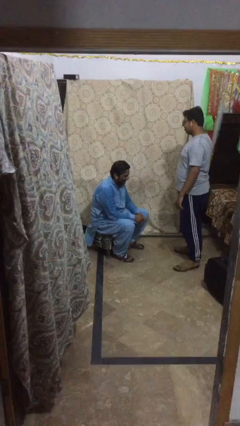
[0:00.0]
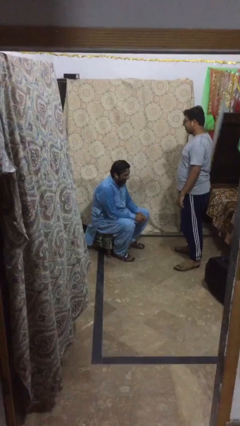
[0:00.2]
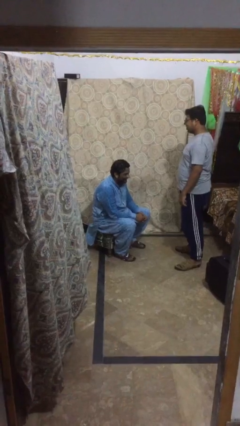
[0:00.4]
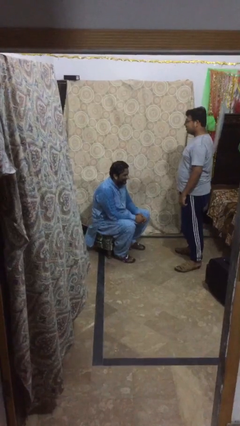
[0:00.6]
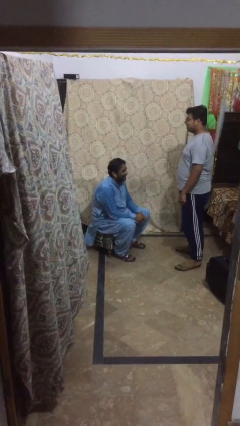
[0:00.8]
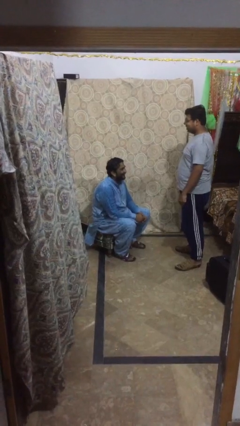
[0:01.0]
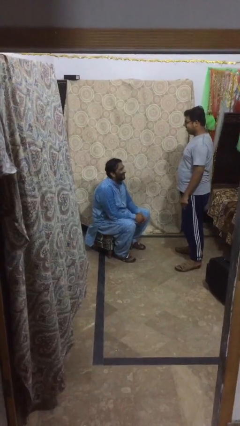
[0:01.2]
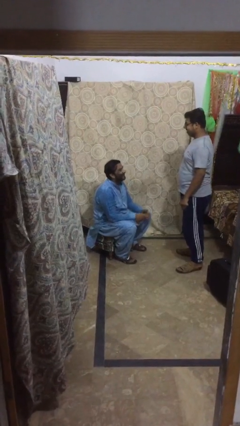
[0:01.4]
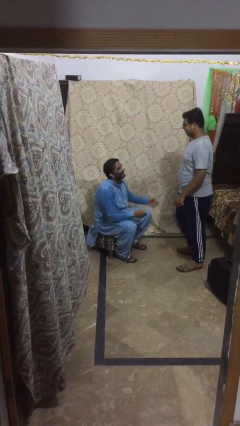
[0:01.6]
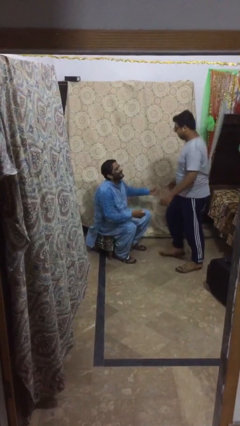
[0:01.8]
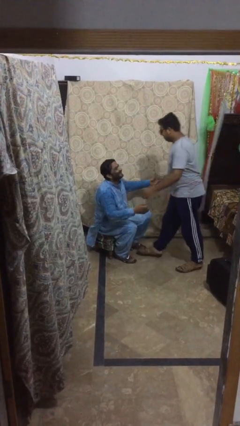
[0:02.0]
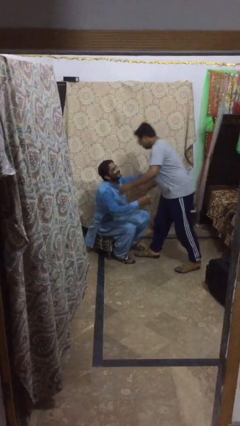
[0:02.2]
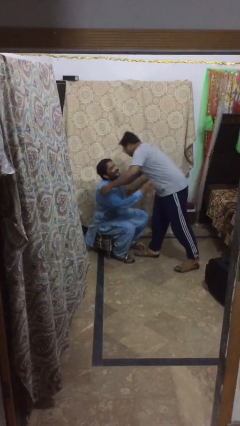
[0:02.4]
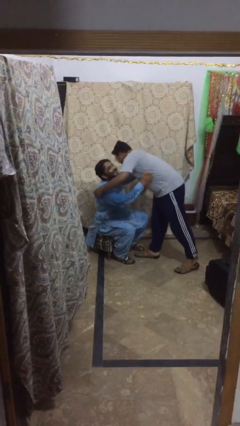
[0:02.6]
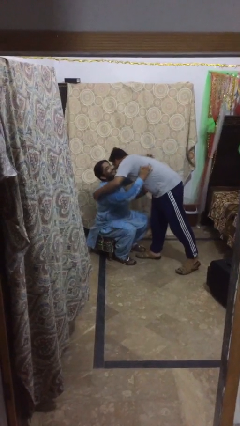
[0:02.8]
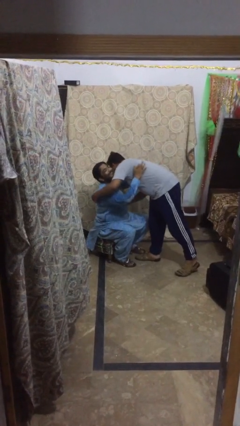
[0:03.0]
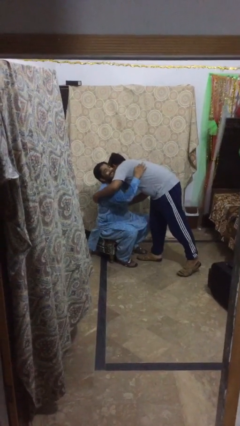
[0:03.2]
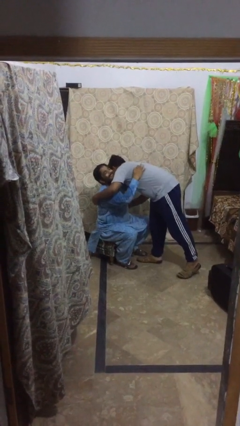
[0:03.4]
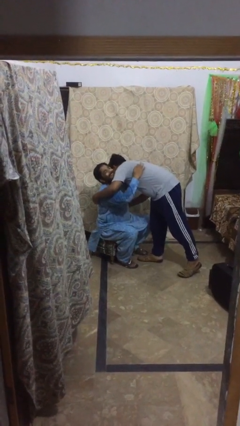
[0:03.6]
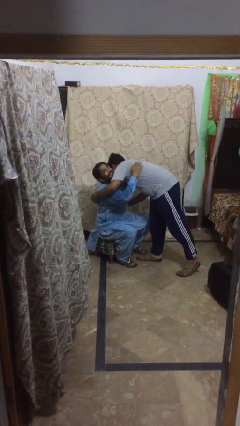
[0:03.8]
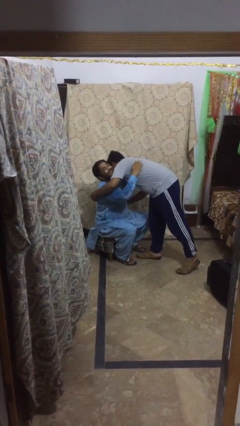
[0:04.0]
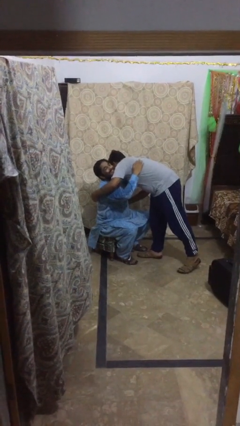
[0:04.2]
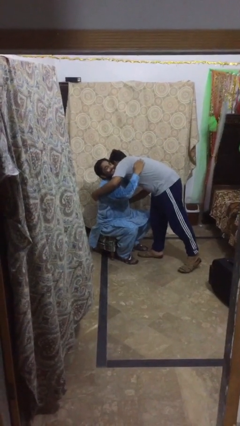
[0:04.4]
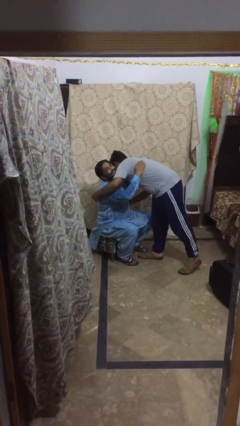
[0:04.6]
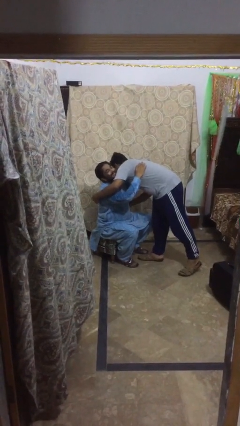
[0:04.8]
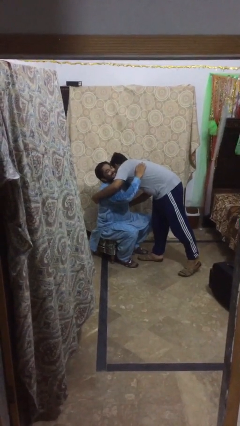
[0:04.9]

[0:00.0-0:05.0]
person embraces person

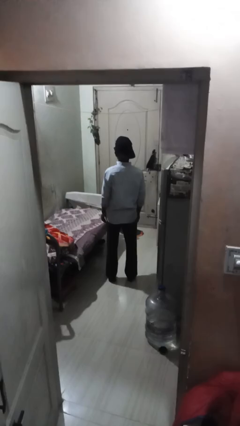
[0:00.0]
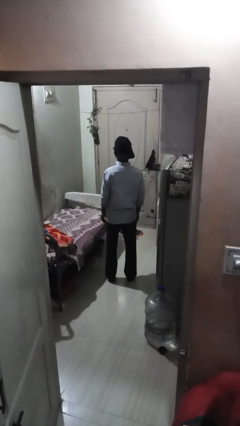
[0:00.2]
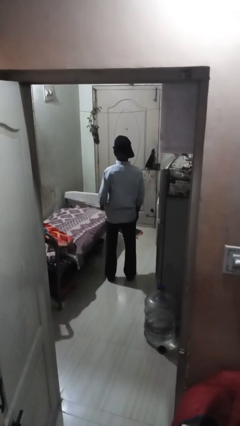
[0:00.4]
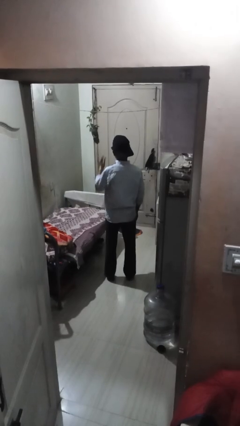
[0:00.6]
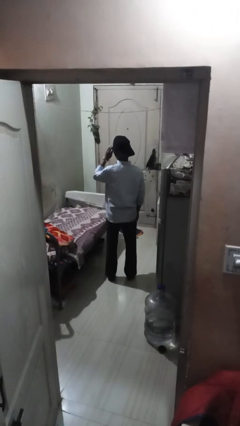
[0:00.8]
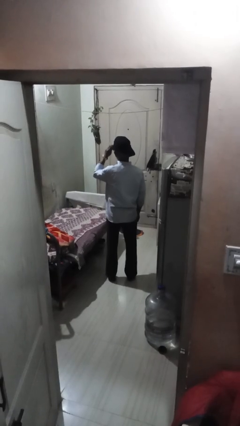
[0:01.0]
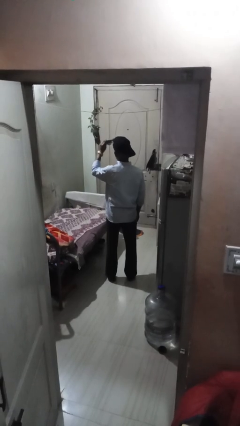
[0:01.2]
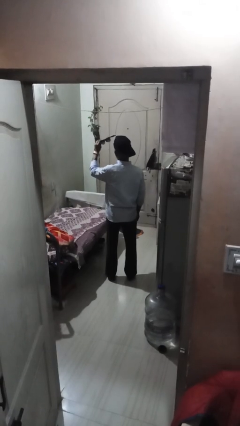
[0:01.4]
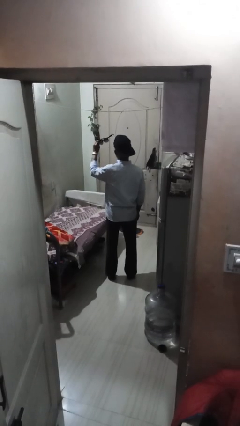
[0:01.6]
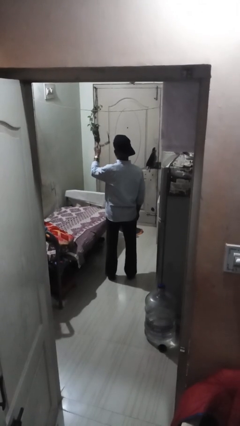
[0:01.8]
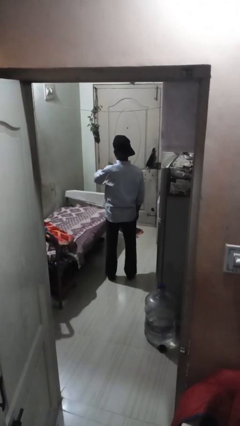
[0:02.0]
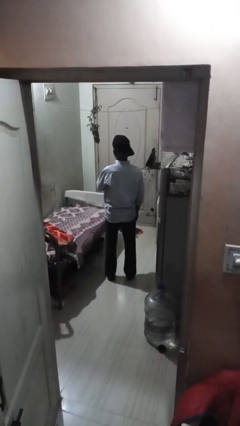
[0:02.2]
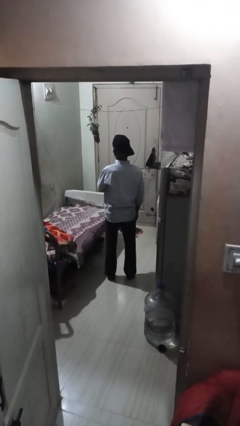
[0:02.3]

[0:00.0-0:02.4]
person takes off sunglasses

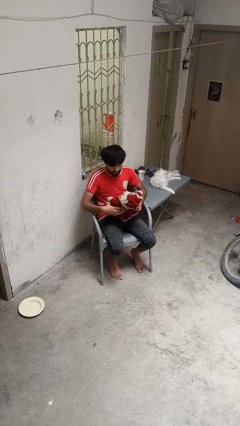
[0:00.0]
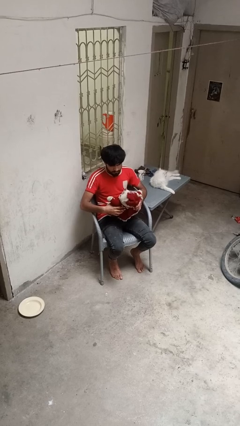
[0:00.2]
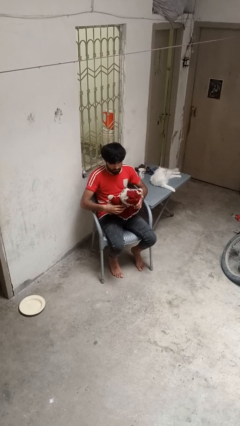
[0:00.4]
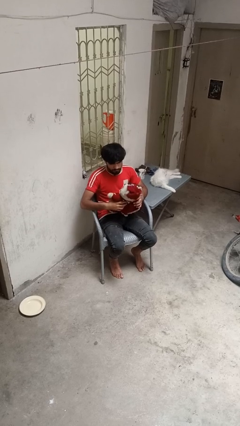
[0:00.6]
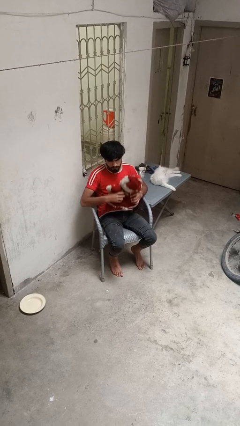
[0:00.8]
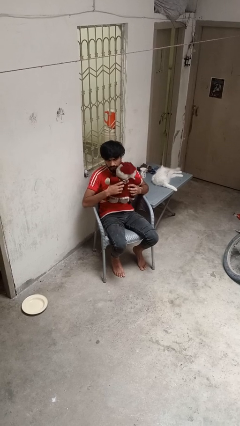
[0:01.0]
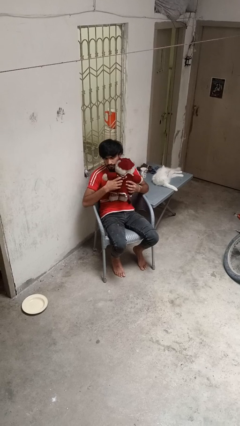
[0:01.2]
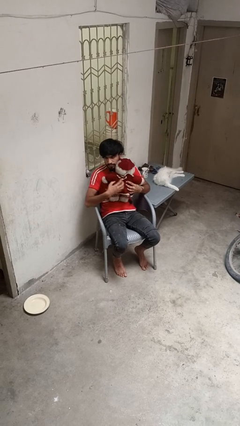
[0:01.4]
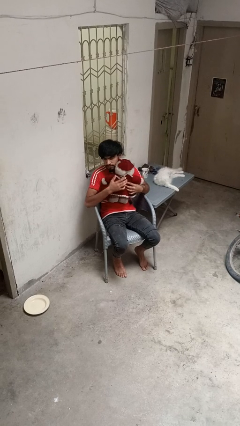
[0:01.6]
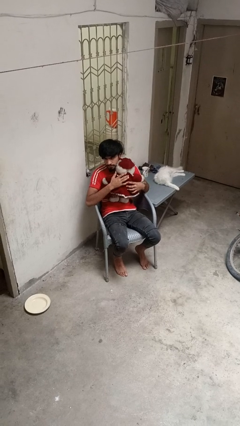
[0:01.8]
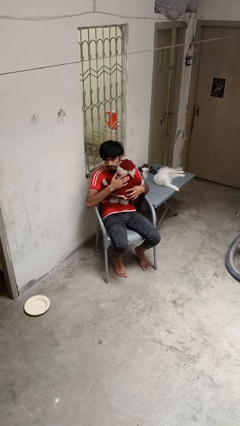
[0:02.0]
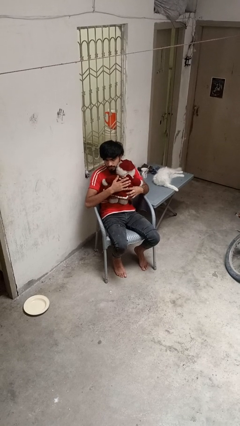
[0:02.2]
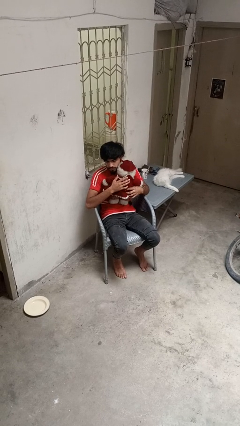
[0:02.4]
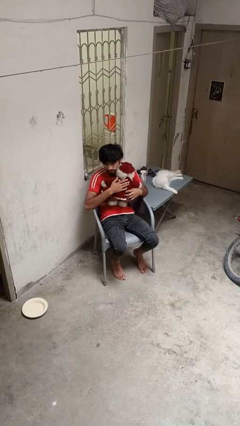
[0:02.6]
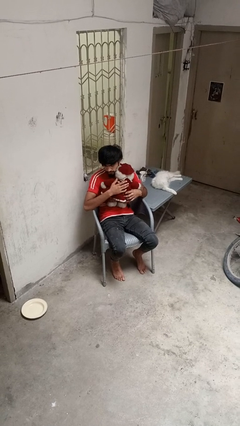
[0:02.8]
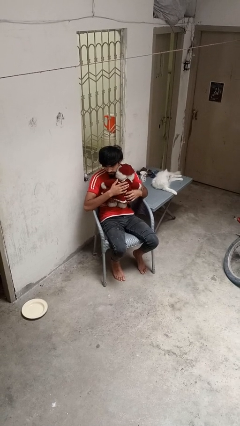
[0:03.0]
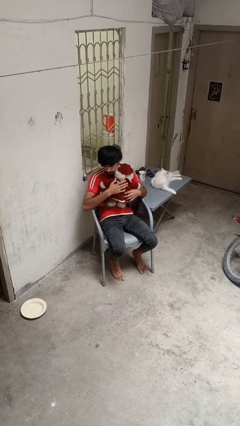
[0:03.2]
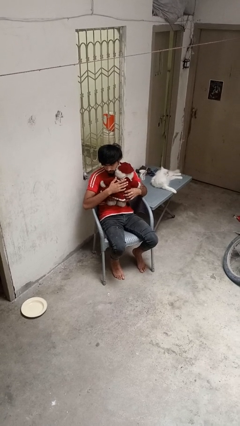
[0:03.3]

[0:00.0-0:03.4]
person hugs stuffed animal

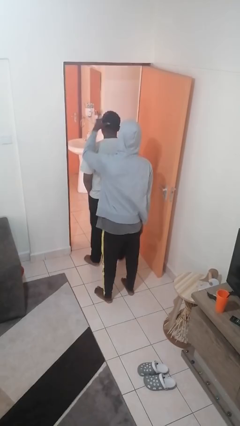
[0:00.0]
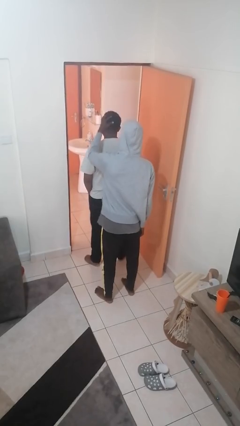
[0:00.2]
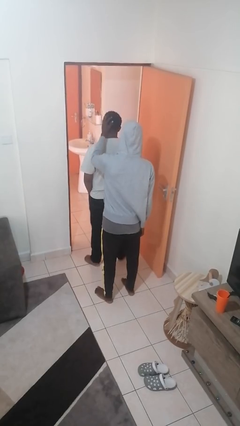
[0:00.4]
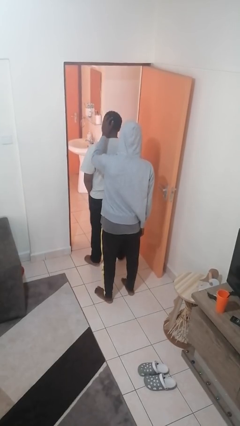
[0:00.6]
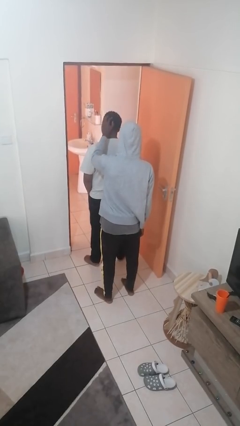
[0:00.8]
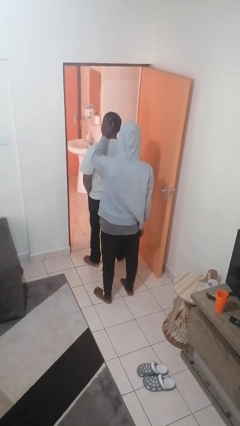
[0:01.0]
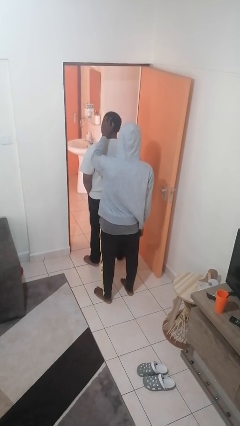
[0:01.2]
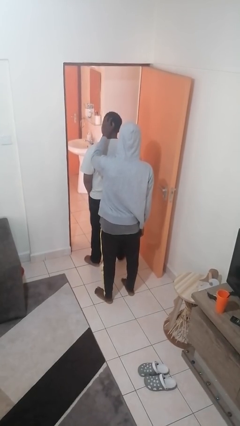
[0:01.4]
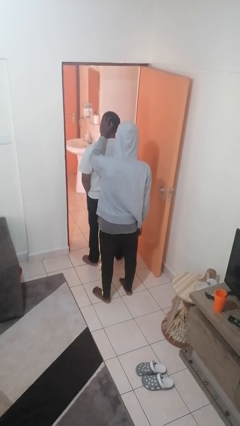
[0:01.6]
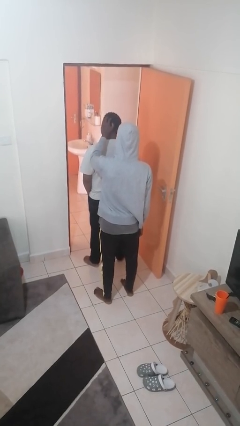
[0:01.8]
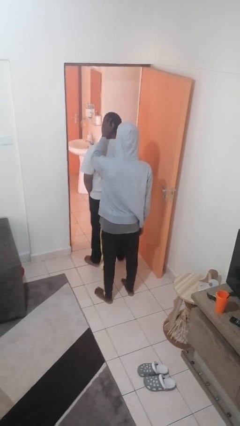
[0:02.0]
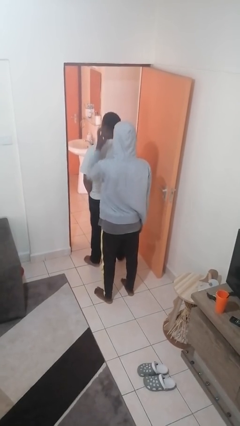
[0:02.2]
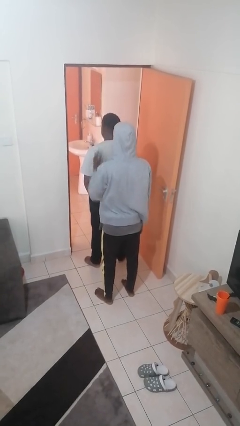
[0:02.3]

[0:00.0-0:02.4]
person grabs person by hair

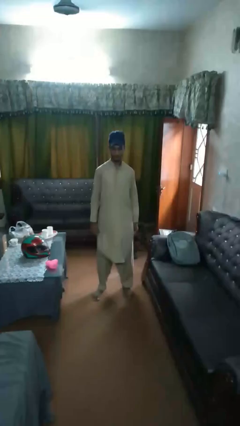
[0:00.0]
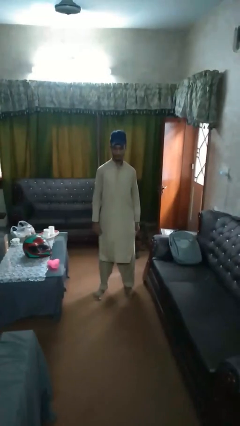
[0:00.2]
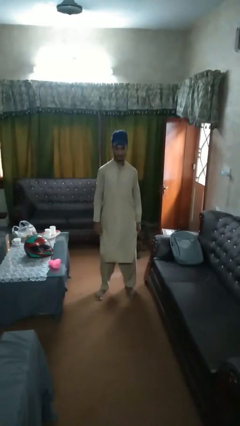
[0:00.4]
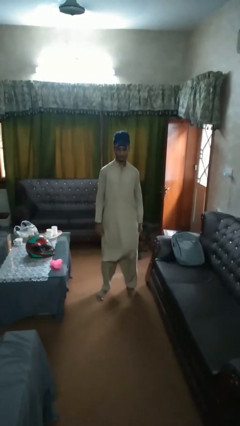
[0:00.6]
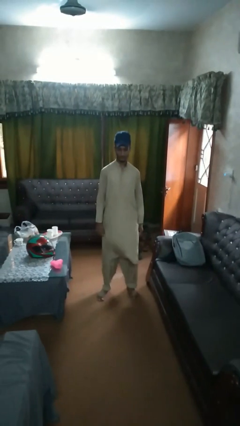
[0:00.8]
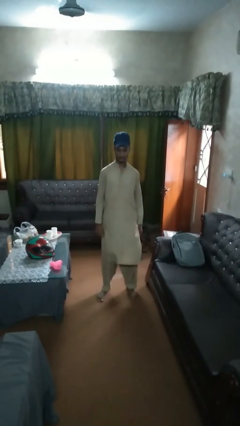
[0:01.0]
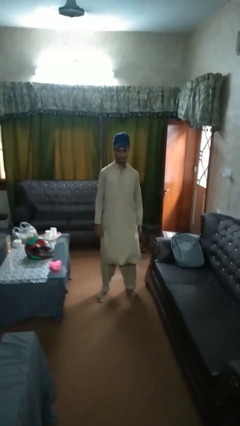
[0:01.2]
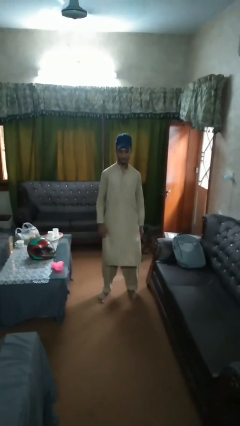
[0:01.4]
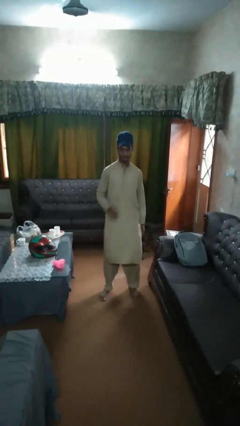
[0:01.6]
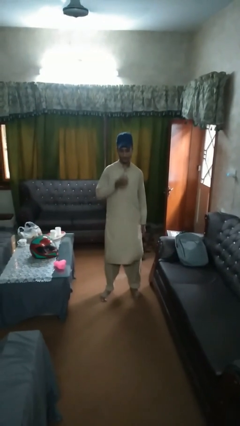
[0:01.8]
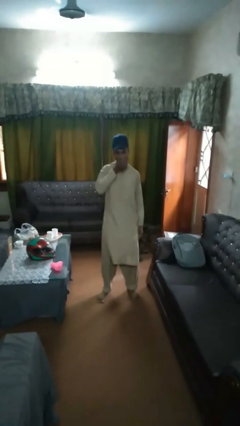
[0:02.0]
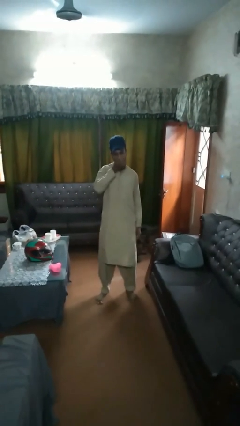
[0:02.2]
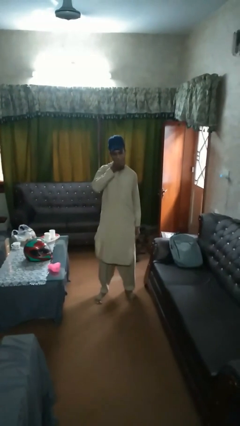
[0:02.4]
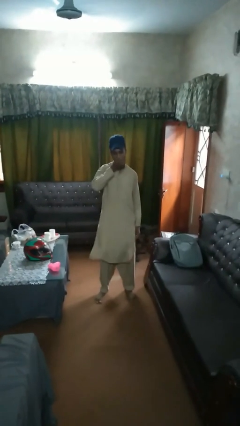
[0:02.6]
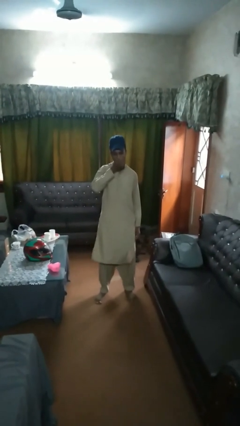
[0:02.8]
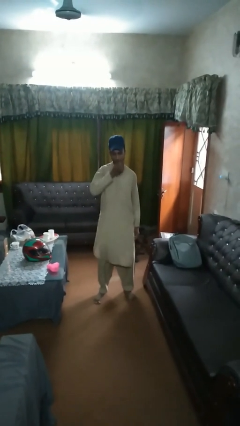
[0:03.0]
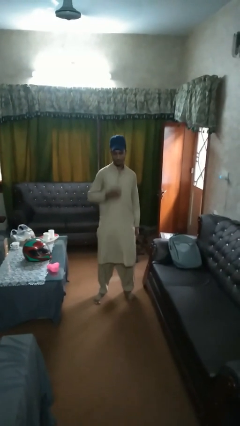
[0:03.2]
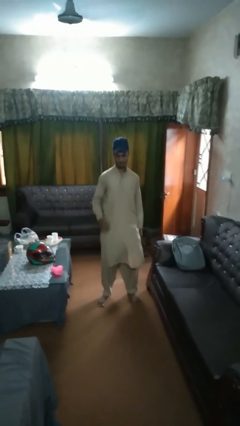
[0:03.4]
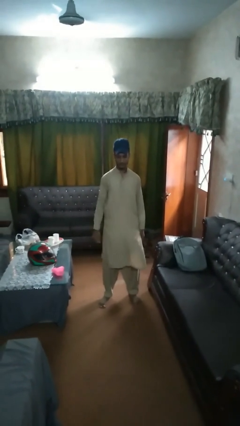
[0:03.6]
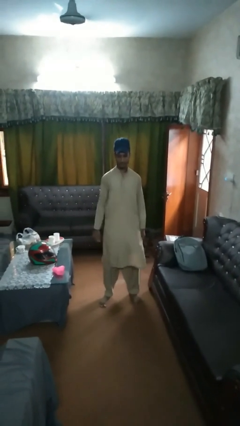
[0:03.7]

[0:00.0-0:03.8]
person eats apple

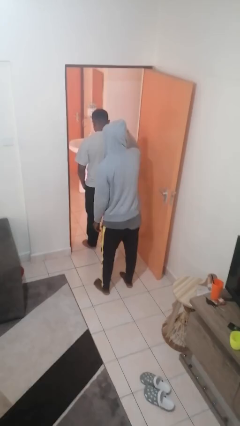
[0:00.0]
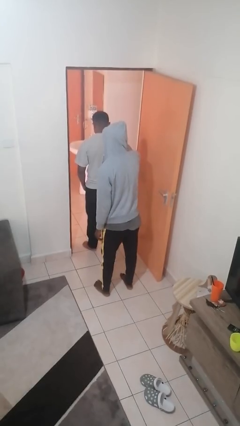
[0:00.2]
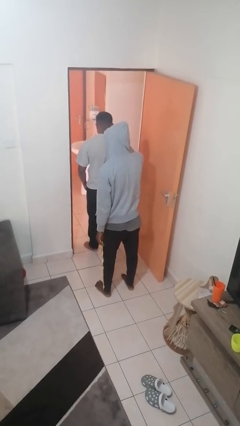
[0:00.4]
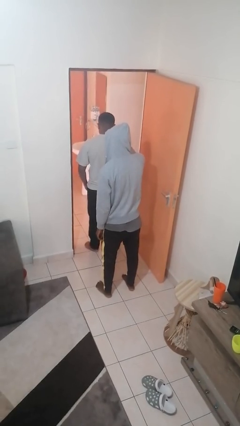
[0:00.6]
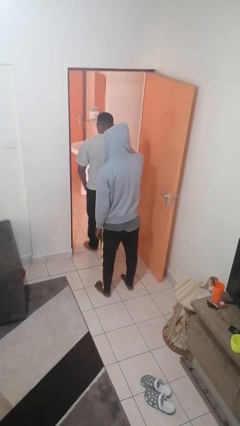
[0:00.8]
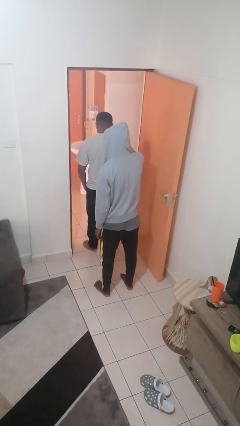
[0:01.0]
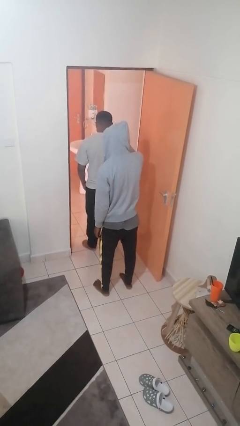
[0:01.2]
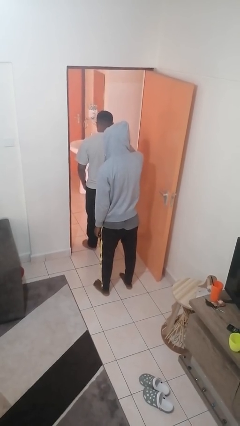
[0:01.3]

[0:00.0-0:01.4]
person grabs person by shoulder
